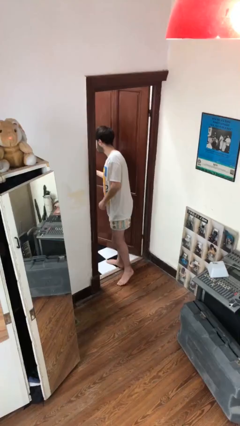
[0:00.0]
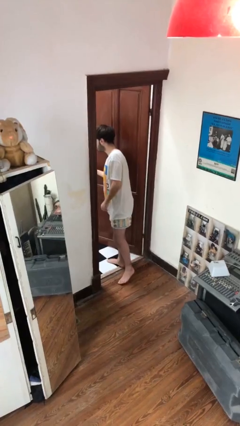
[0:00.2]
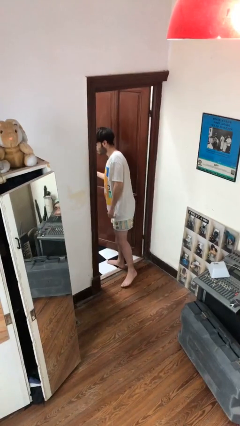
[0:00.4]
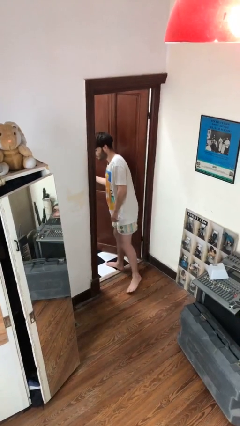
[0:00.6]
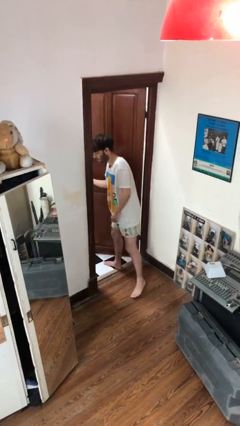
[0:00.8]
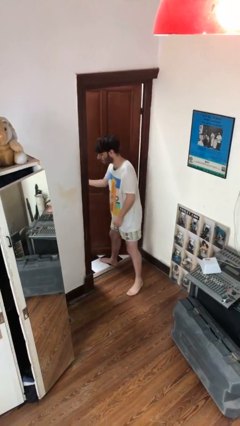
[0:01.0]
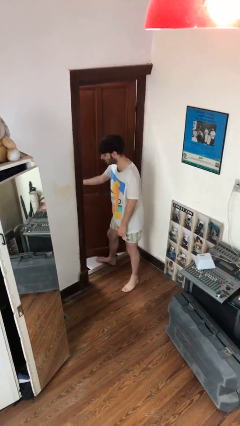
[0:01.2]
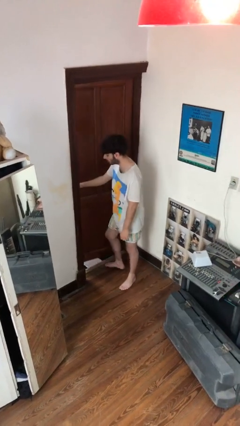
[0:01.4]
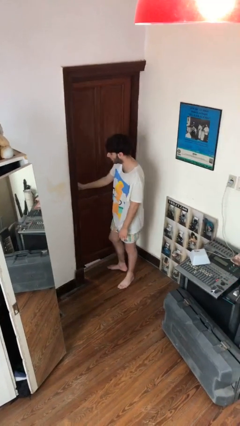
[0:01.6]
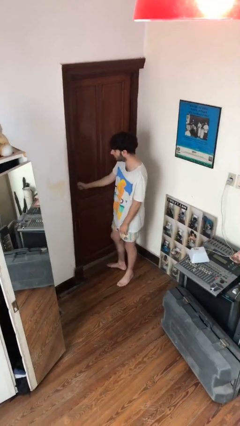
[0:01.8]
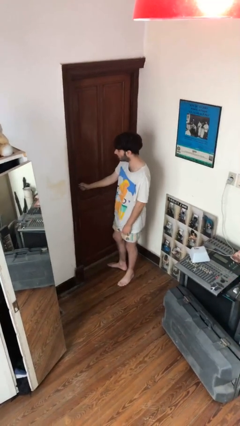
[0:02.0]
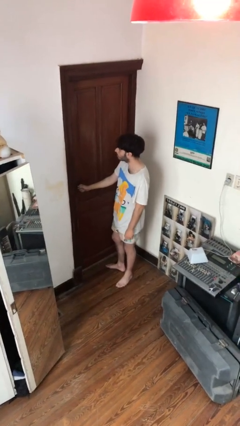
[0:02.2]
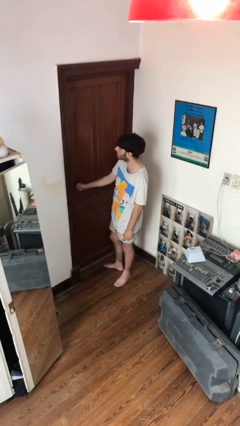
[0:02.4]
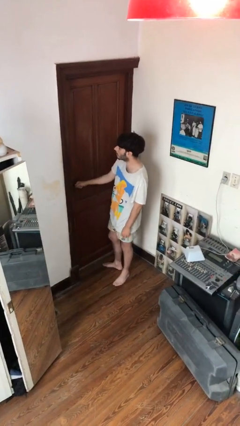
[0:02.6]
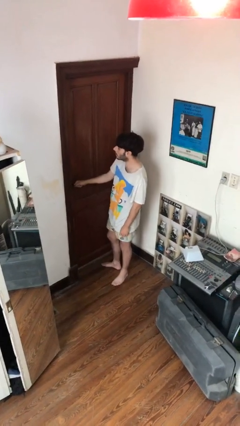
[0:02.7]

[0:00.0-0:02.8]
person closes facility door

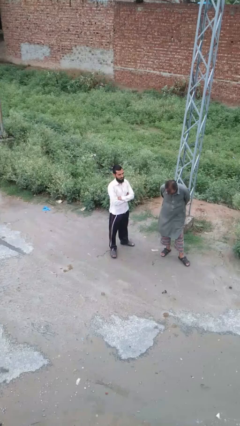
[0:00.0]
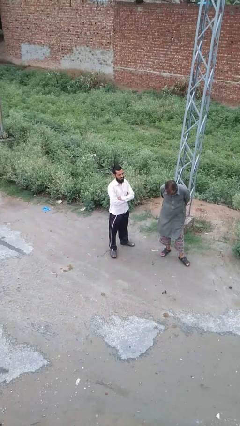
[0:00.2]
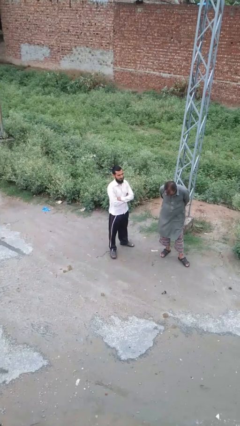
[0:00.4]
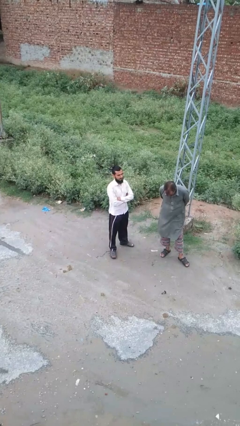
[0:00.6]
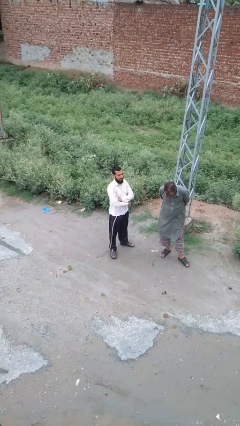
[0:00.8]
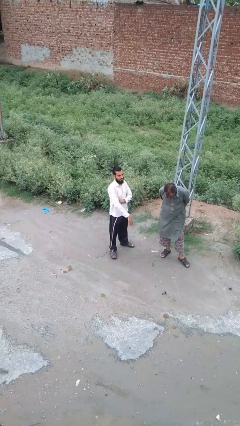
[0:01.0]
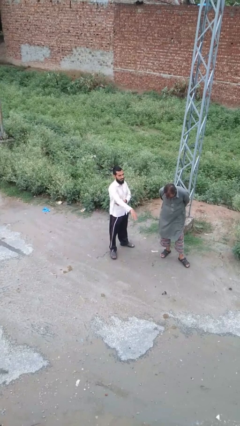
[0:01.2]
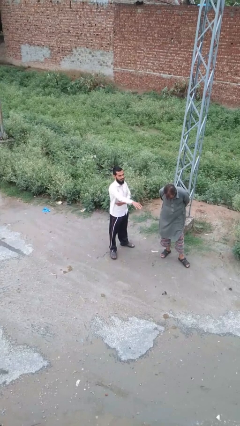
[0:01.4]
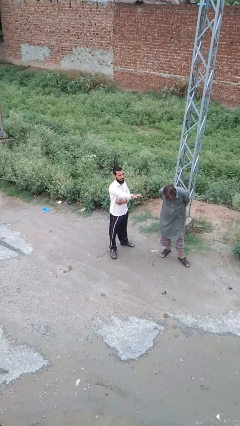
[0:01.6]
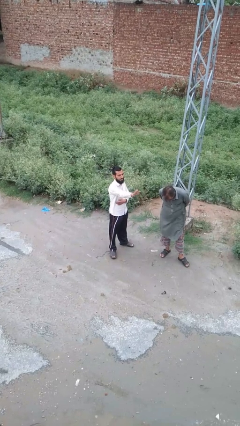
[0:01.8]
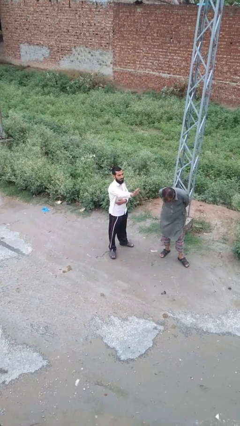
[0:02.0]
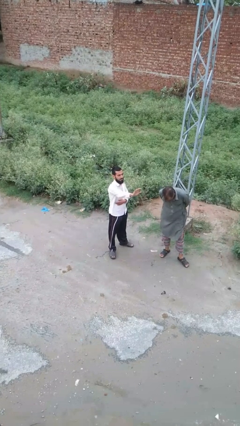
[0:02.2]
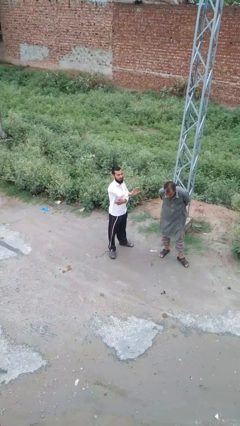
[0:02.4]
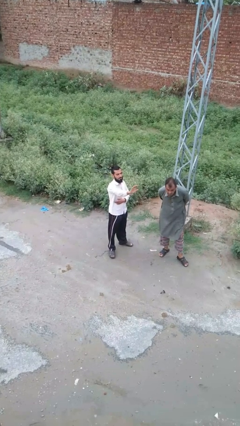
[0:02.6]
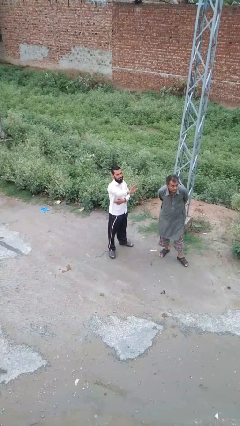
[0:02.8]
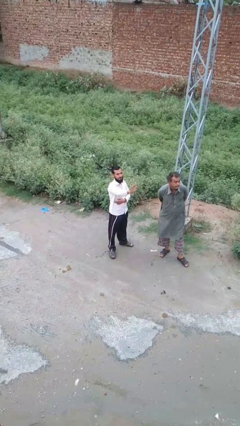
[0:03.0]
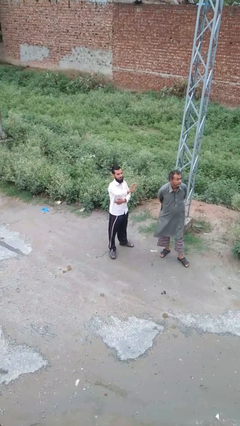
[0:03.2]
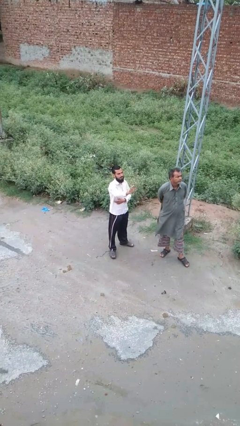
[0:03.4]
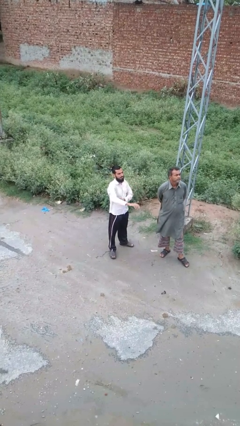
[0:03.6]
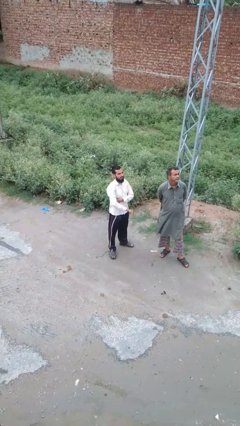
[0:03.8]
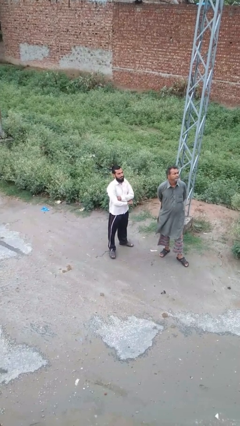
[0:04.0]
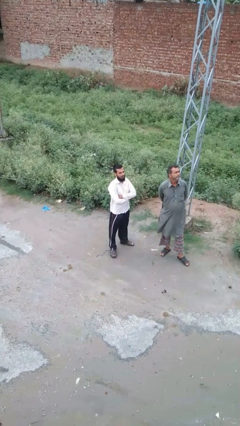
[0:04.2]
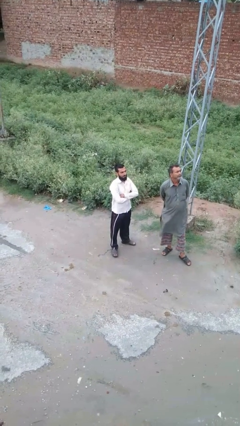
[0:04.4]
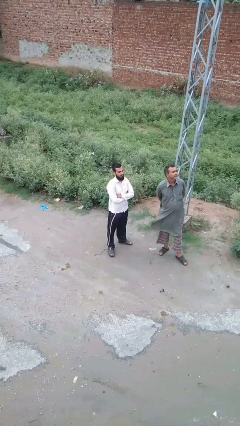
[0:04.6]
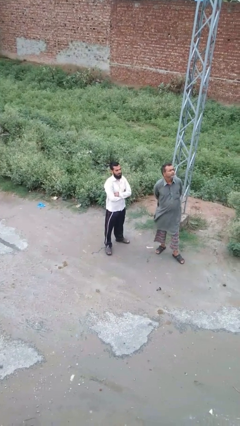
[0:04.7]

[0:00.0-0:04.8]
person waves at person

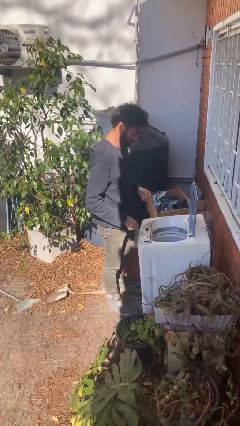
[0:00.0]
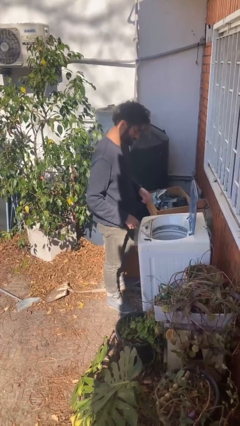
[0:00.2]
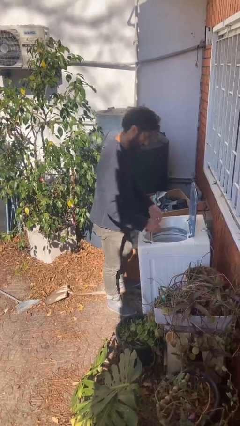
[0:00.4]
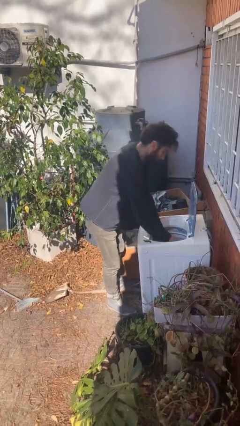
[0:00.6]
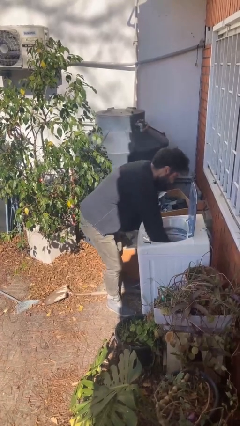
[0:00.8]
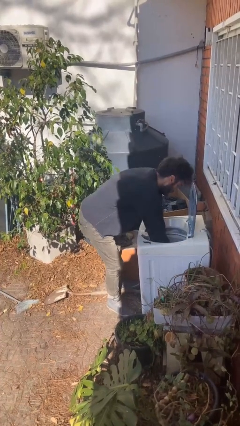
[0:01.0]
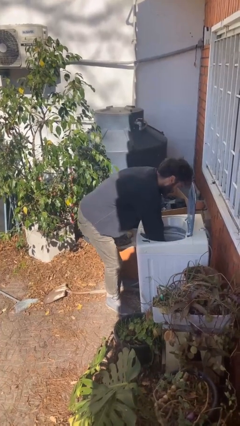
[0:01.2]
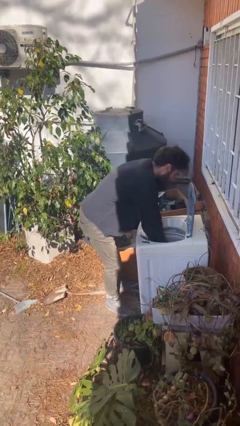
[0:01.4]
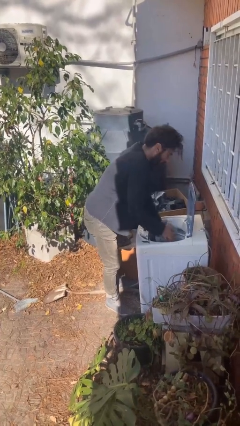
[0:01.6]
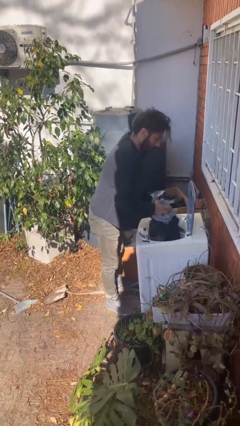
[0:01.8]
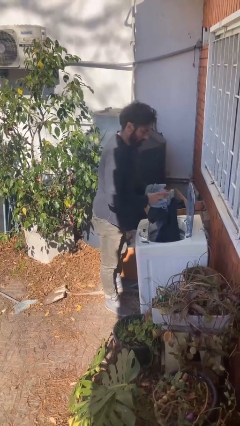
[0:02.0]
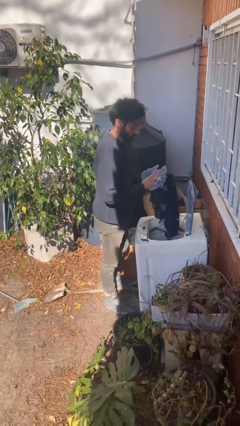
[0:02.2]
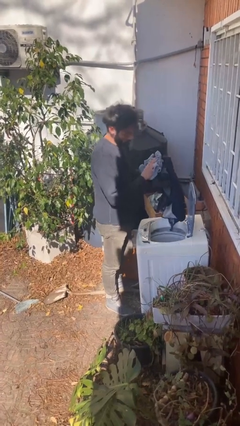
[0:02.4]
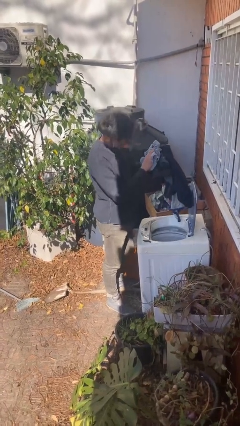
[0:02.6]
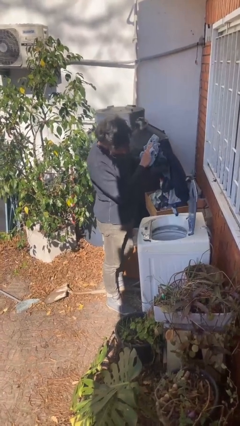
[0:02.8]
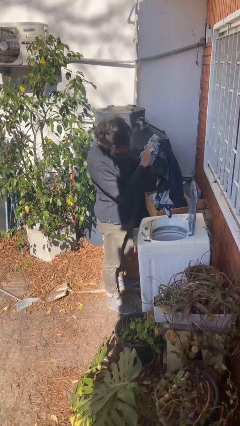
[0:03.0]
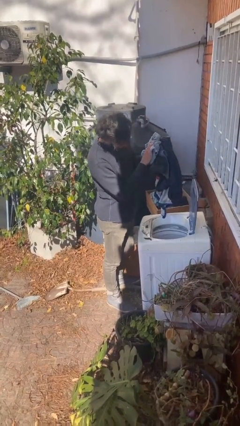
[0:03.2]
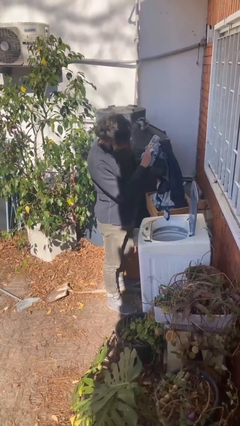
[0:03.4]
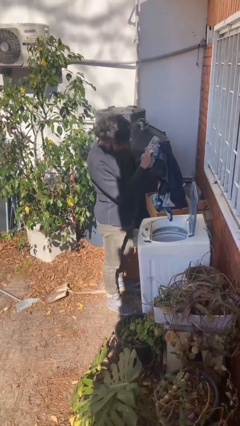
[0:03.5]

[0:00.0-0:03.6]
person loads clotheswasher

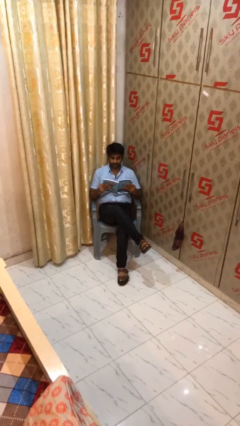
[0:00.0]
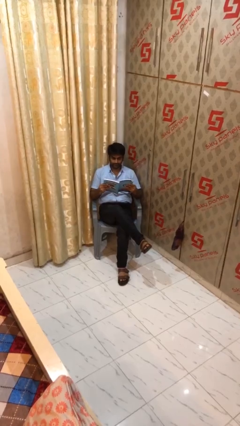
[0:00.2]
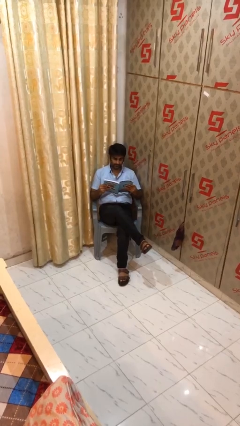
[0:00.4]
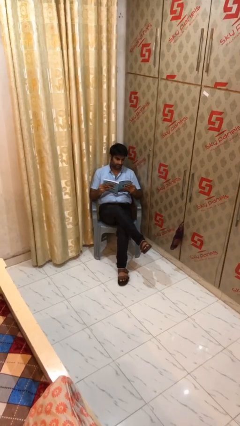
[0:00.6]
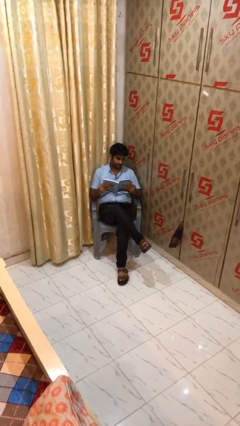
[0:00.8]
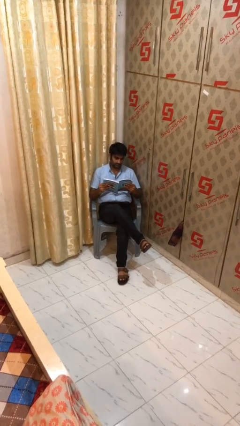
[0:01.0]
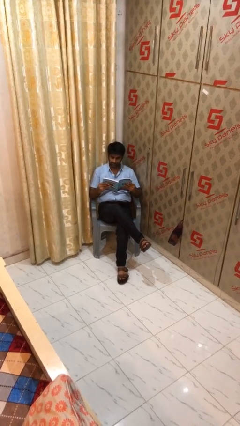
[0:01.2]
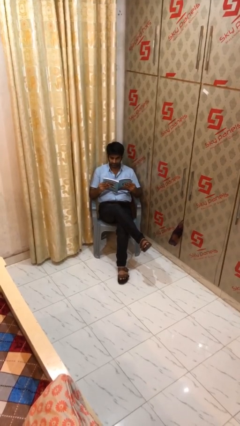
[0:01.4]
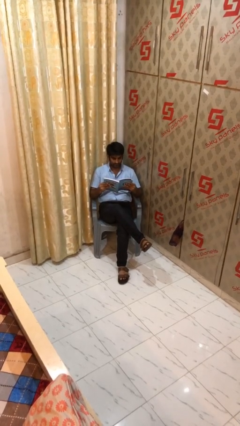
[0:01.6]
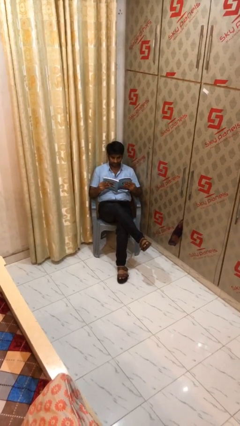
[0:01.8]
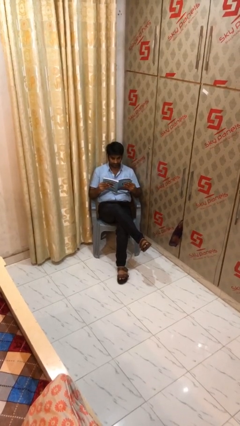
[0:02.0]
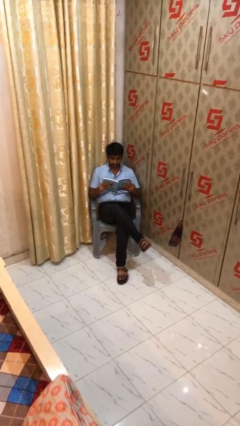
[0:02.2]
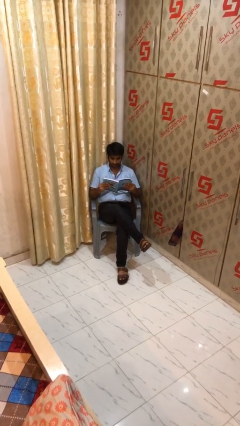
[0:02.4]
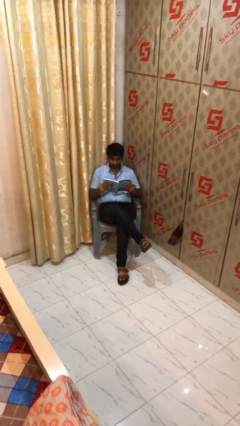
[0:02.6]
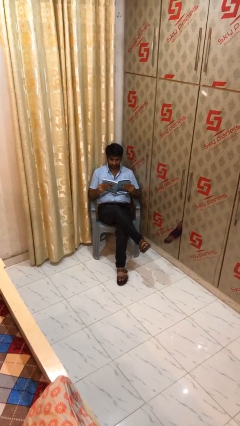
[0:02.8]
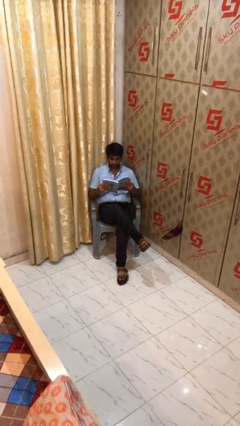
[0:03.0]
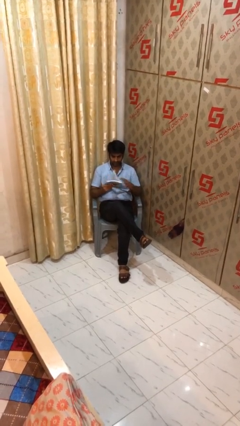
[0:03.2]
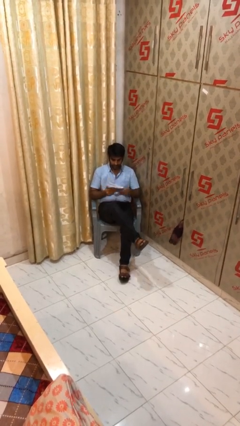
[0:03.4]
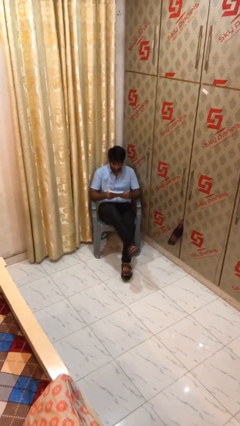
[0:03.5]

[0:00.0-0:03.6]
person reads document

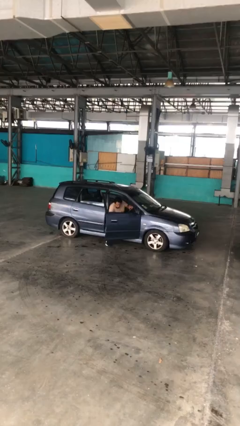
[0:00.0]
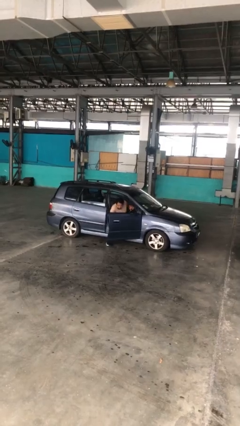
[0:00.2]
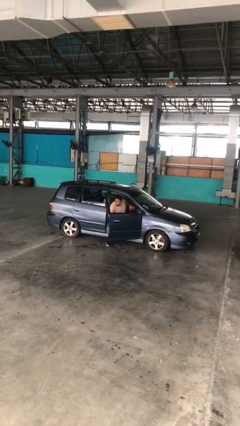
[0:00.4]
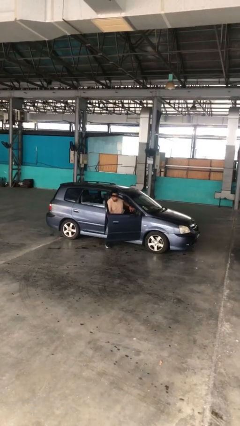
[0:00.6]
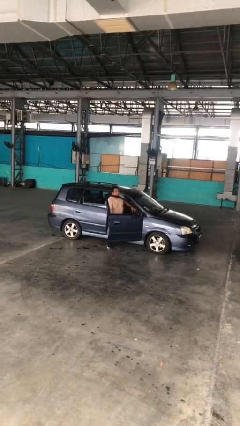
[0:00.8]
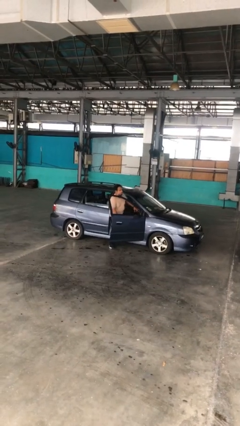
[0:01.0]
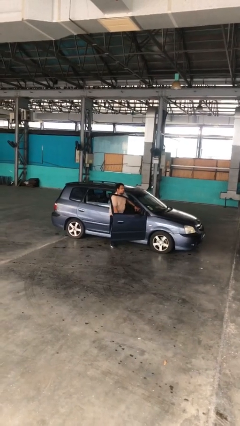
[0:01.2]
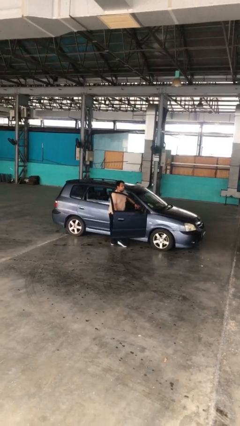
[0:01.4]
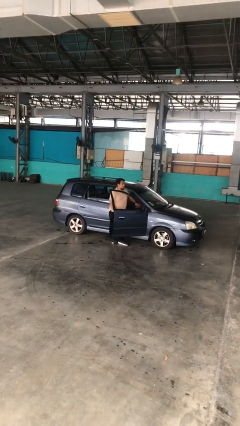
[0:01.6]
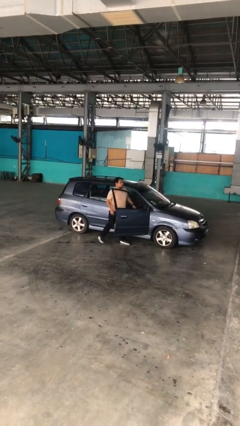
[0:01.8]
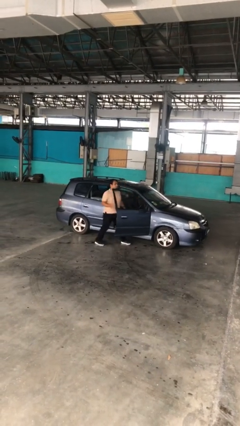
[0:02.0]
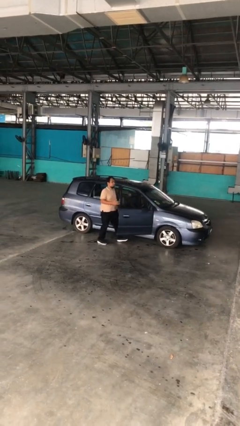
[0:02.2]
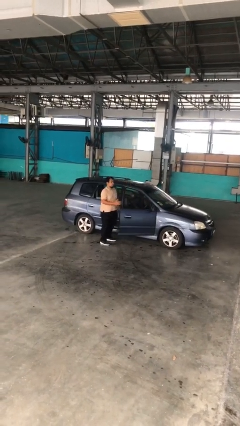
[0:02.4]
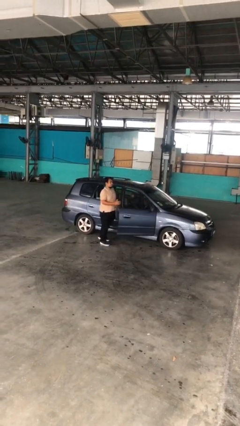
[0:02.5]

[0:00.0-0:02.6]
person exits car

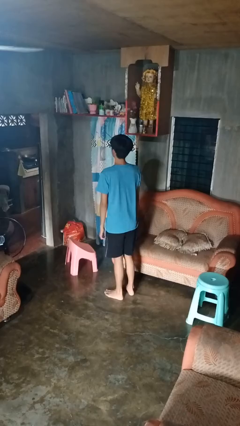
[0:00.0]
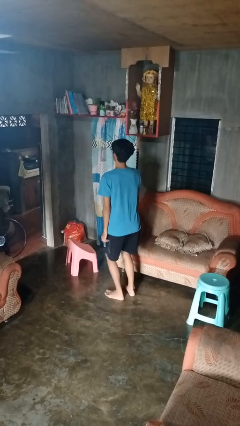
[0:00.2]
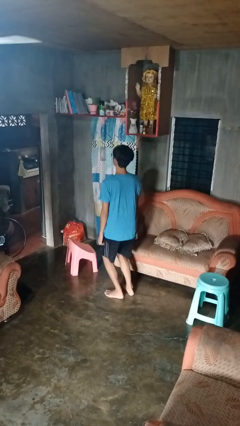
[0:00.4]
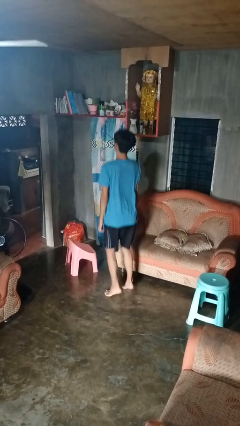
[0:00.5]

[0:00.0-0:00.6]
person jumps
